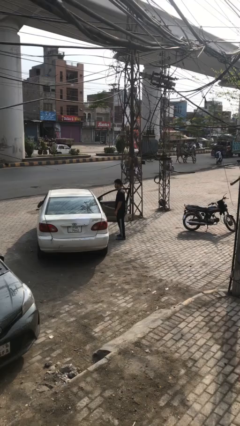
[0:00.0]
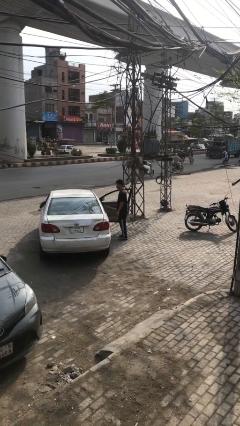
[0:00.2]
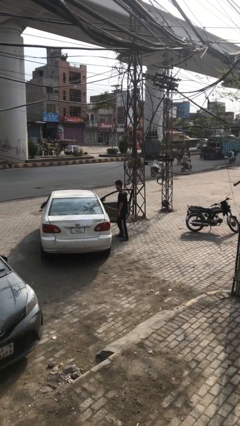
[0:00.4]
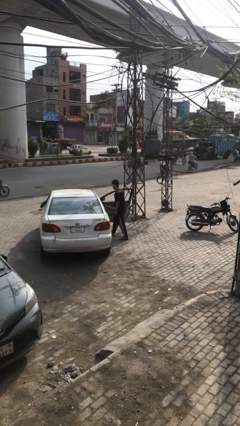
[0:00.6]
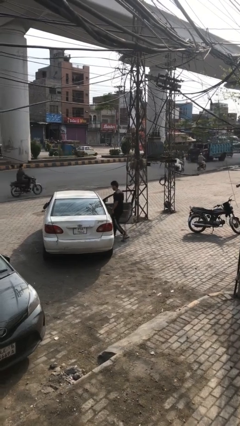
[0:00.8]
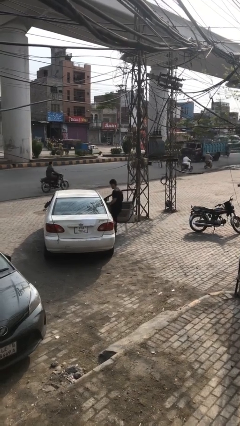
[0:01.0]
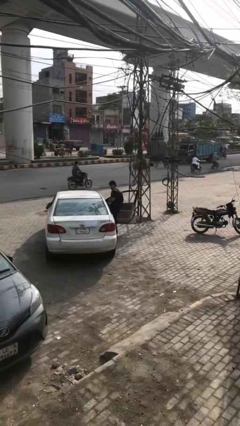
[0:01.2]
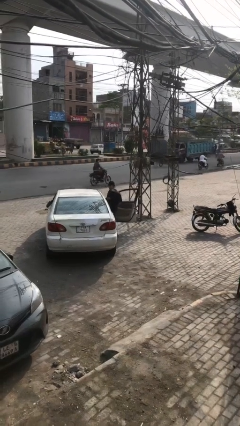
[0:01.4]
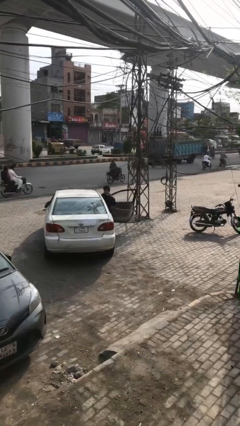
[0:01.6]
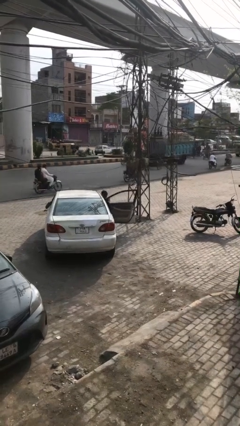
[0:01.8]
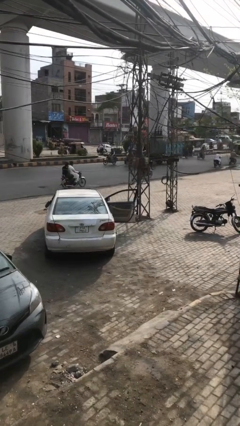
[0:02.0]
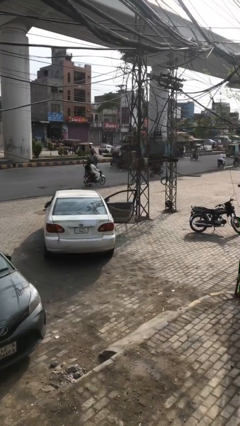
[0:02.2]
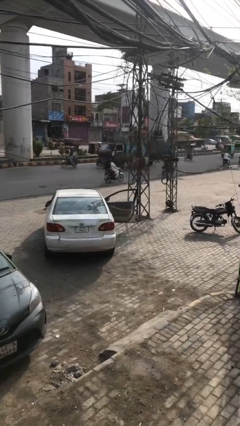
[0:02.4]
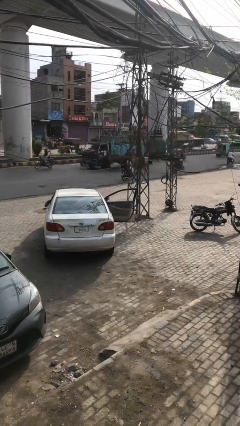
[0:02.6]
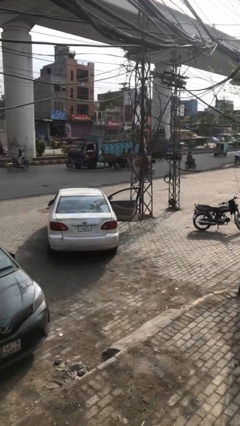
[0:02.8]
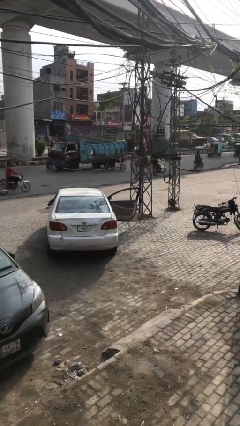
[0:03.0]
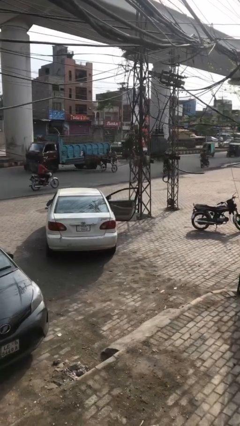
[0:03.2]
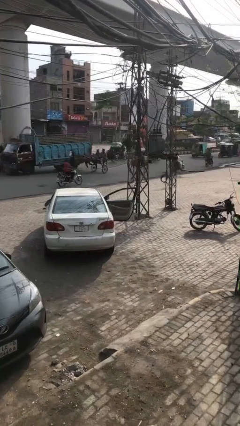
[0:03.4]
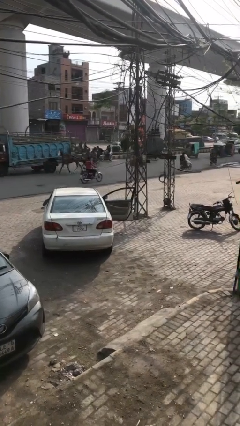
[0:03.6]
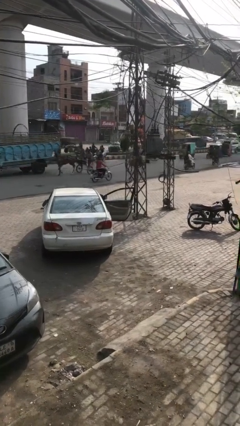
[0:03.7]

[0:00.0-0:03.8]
person enters car

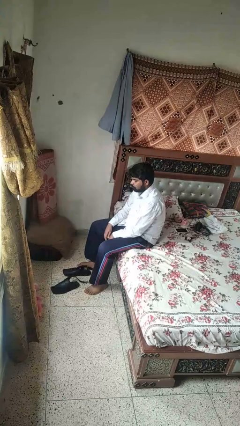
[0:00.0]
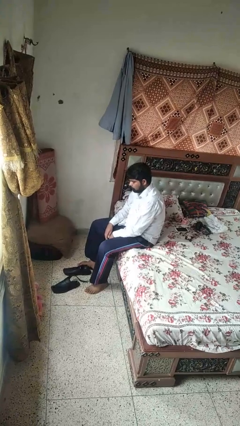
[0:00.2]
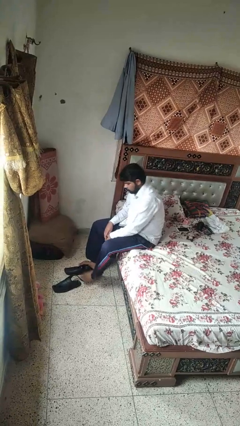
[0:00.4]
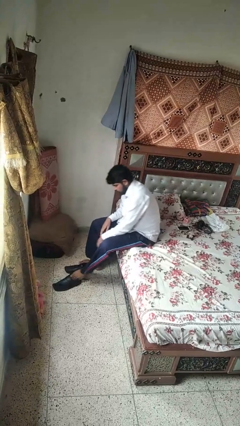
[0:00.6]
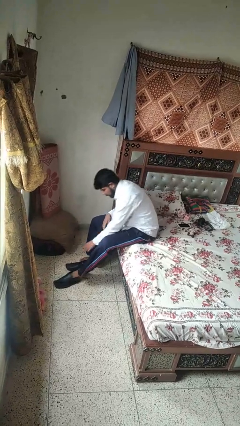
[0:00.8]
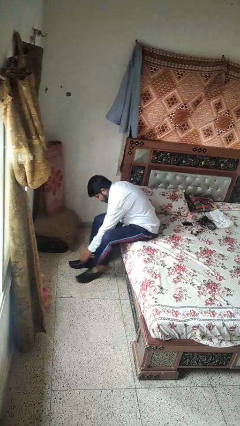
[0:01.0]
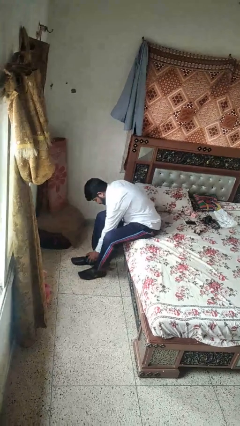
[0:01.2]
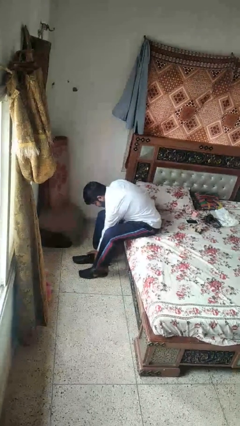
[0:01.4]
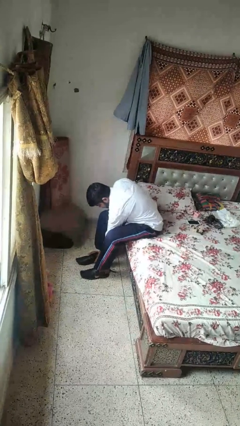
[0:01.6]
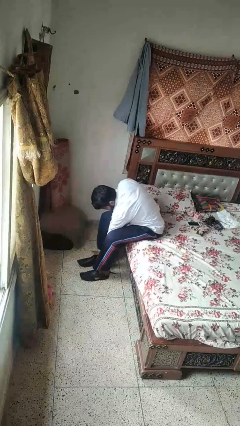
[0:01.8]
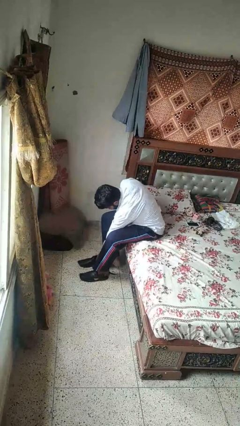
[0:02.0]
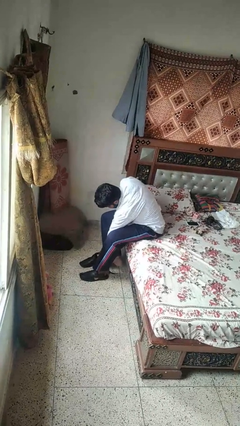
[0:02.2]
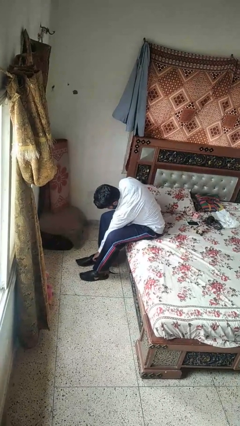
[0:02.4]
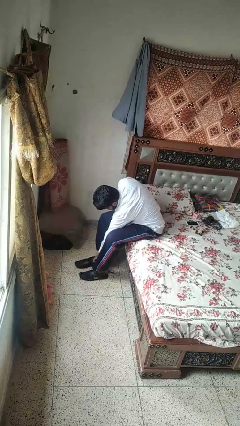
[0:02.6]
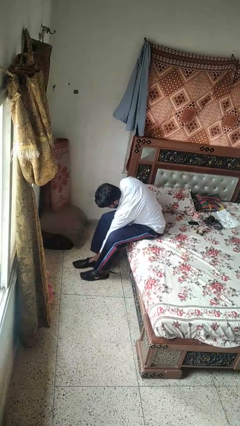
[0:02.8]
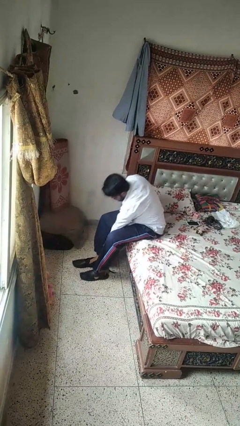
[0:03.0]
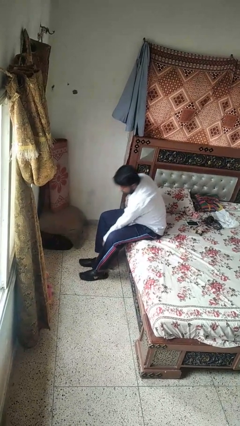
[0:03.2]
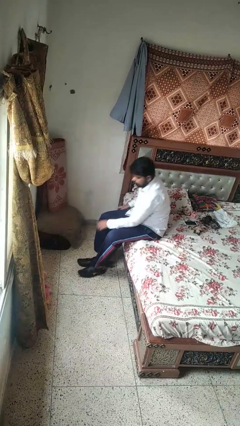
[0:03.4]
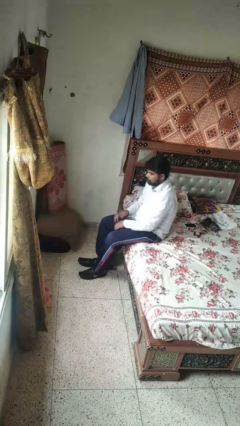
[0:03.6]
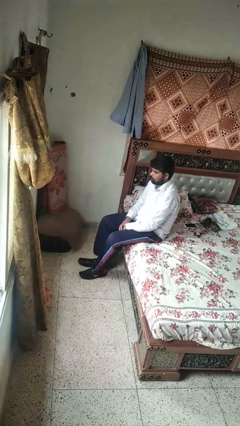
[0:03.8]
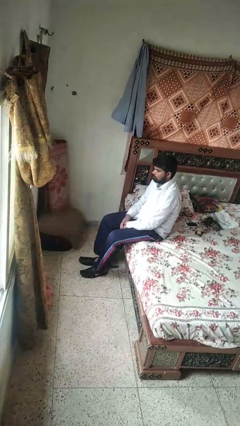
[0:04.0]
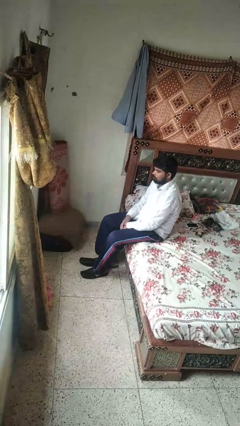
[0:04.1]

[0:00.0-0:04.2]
person puts on shoes

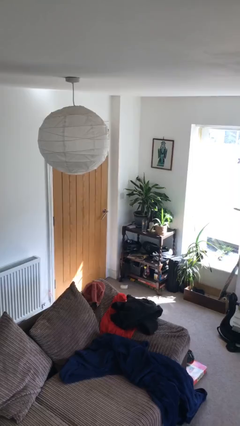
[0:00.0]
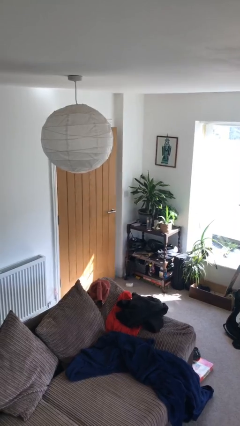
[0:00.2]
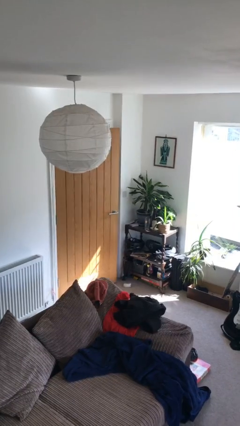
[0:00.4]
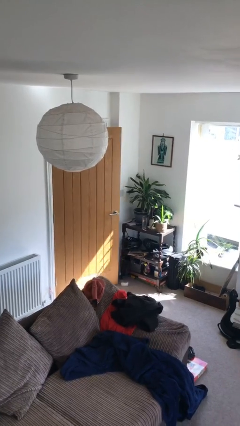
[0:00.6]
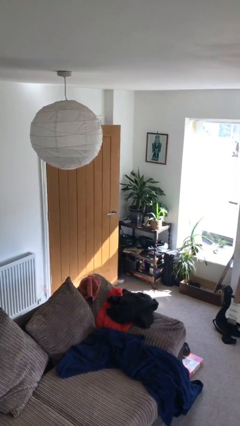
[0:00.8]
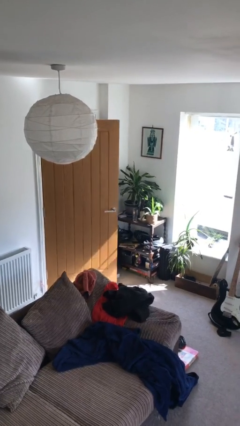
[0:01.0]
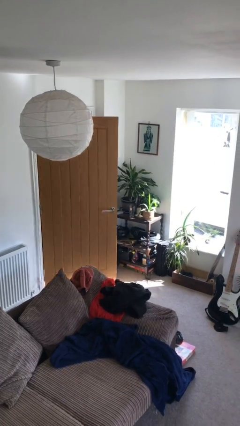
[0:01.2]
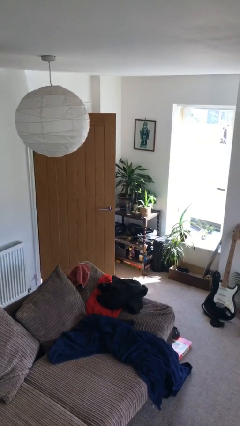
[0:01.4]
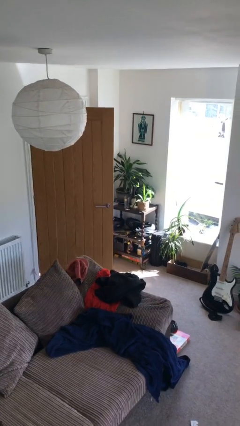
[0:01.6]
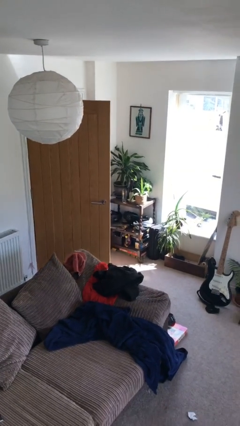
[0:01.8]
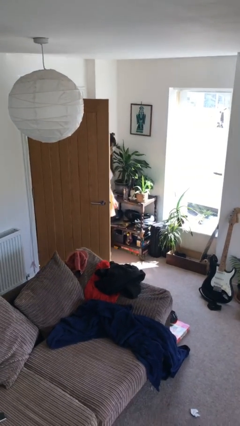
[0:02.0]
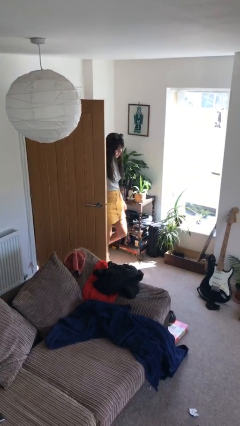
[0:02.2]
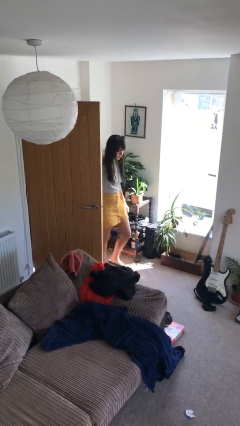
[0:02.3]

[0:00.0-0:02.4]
person opens facility door

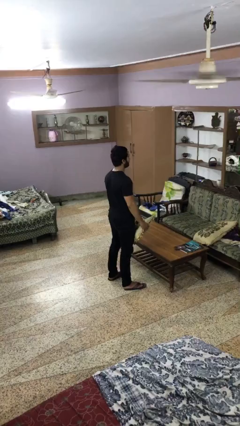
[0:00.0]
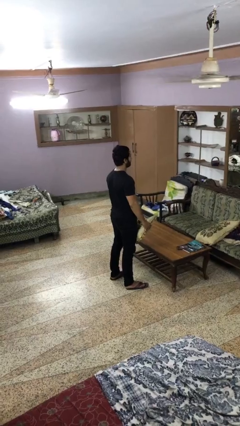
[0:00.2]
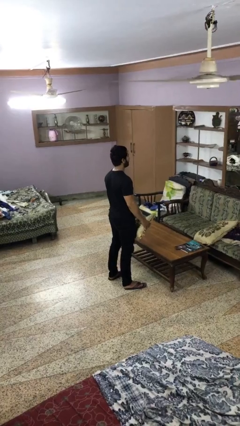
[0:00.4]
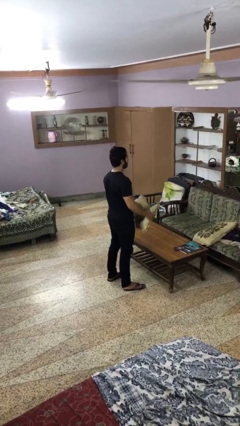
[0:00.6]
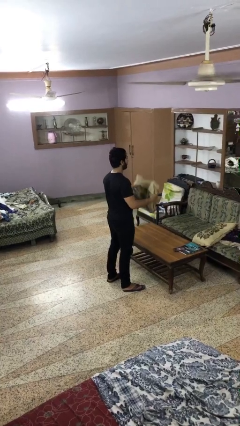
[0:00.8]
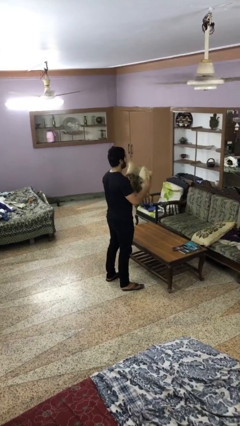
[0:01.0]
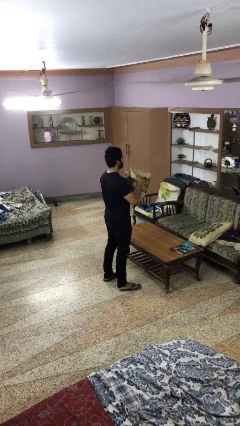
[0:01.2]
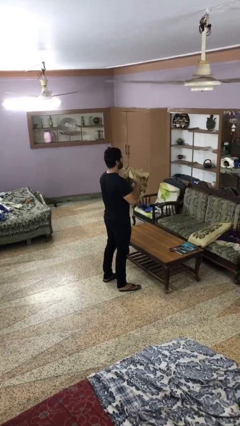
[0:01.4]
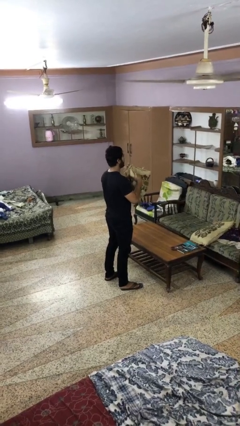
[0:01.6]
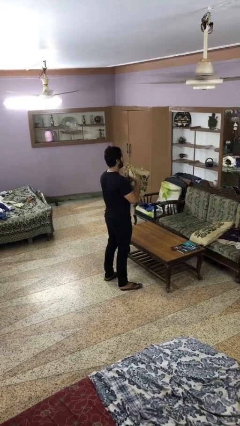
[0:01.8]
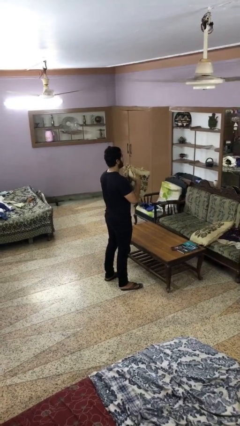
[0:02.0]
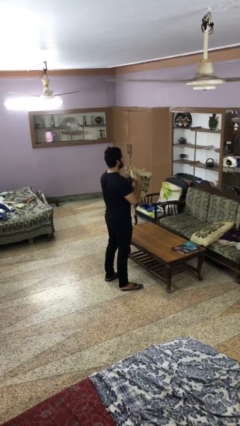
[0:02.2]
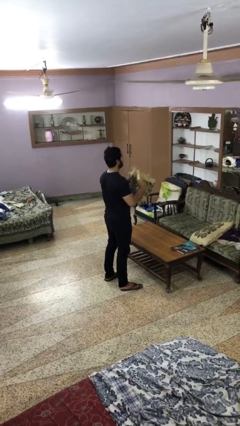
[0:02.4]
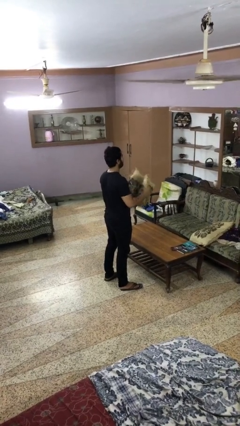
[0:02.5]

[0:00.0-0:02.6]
person squeezes object

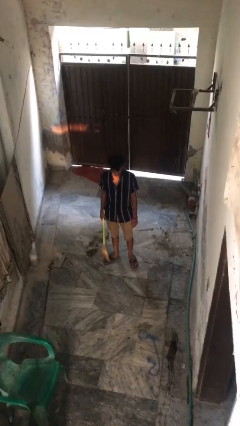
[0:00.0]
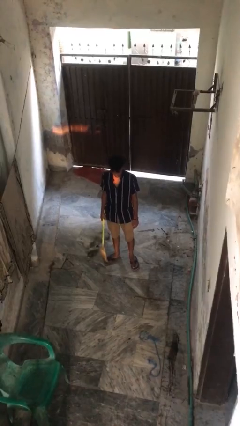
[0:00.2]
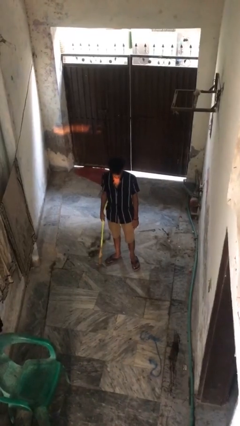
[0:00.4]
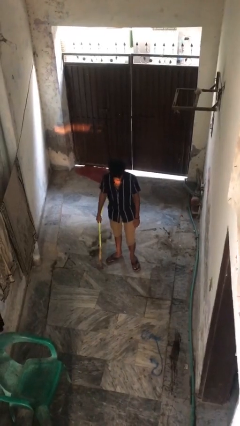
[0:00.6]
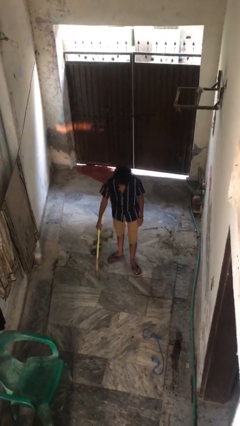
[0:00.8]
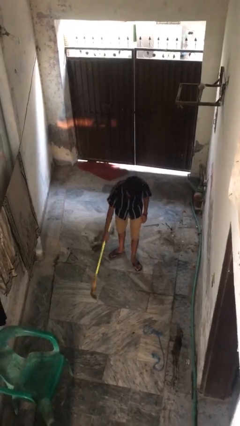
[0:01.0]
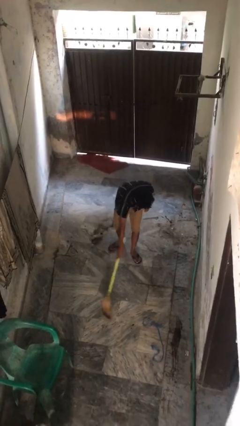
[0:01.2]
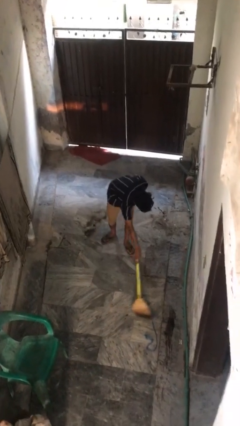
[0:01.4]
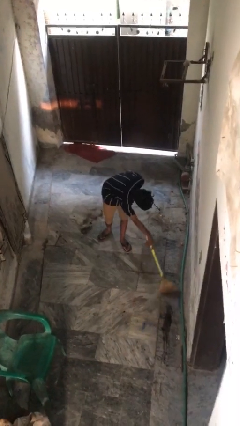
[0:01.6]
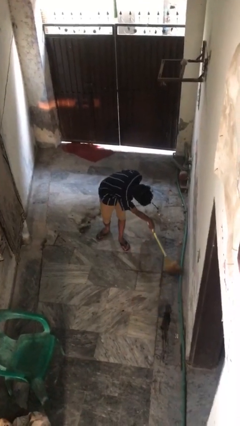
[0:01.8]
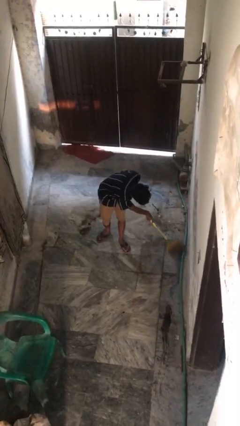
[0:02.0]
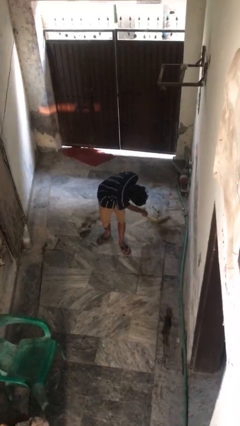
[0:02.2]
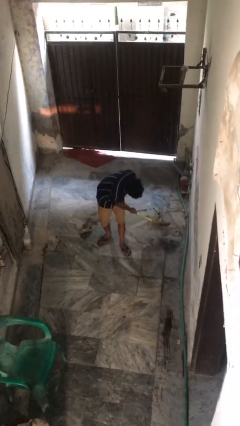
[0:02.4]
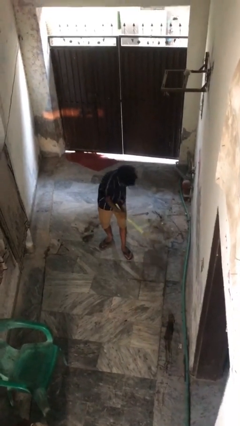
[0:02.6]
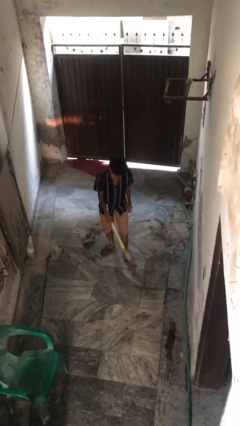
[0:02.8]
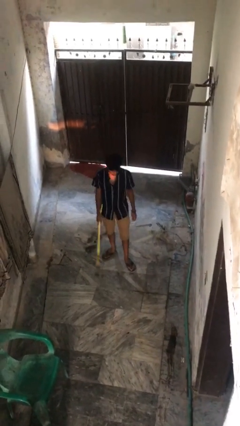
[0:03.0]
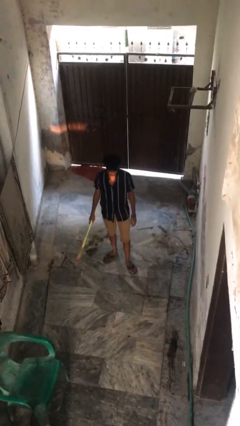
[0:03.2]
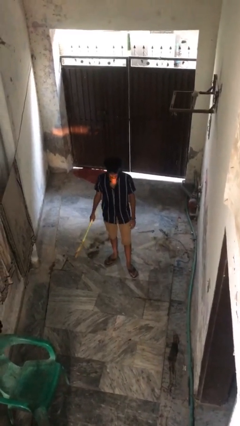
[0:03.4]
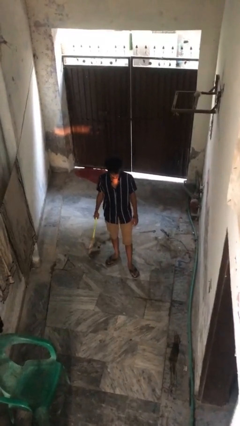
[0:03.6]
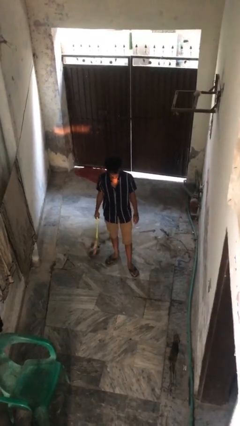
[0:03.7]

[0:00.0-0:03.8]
person sweeps floor

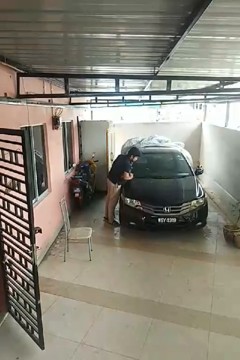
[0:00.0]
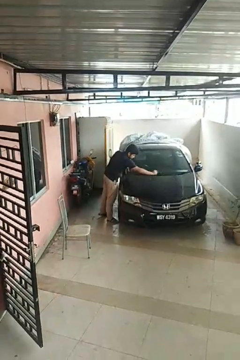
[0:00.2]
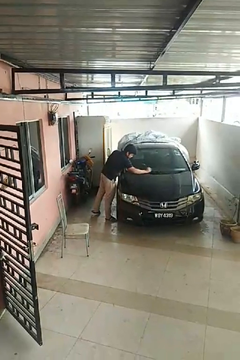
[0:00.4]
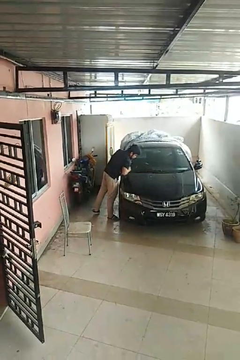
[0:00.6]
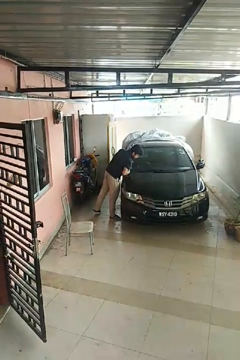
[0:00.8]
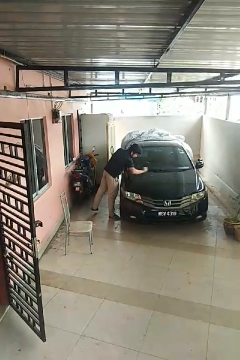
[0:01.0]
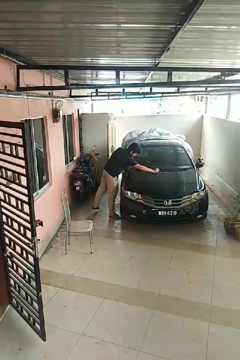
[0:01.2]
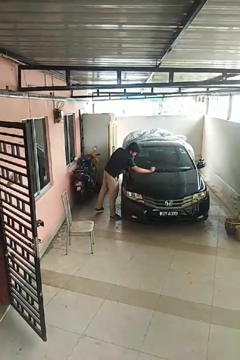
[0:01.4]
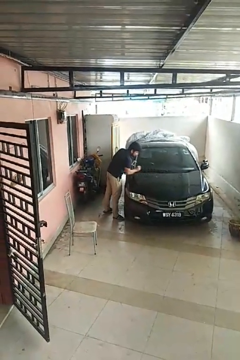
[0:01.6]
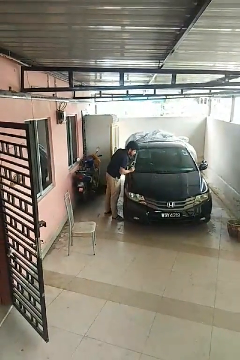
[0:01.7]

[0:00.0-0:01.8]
person polishes car with rag
